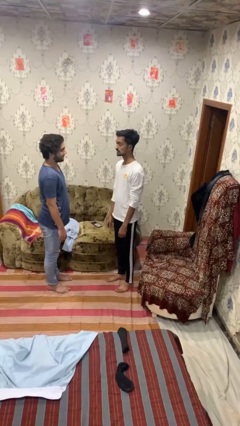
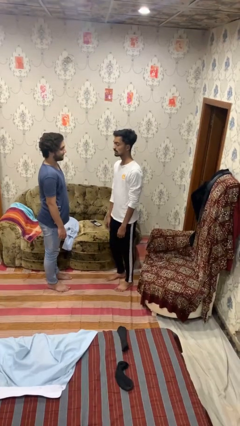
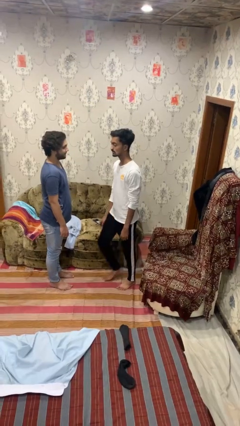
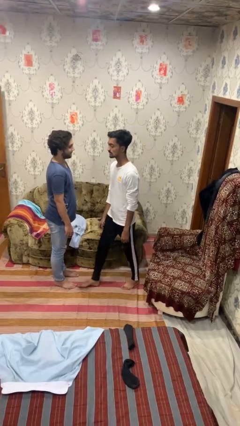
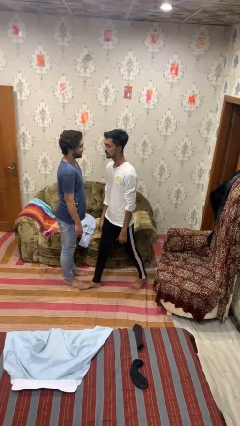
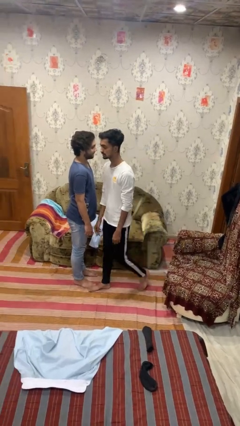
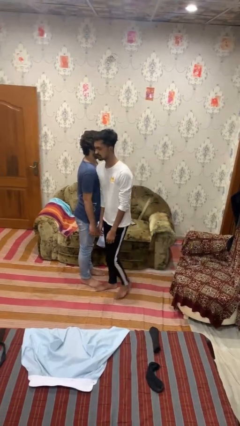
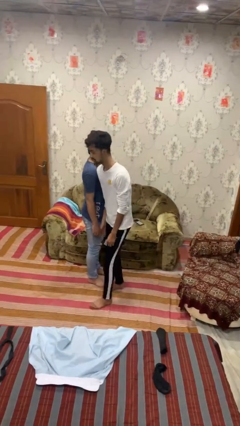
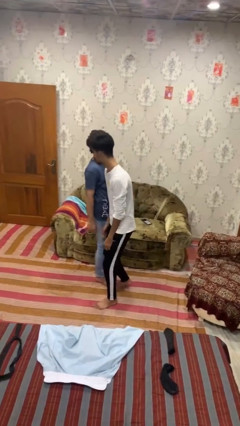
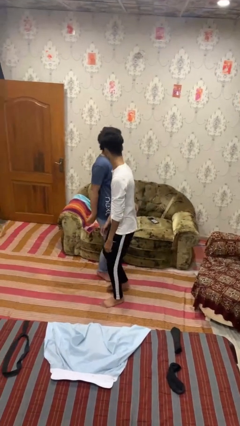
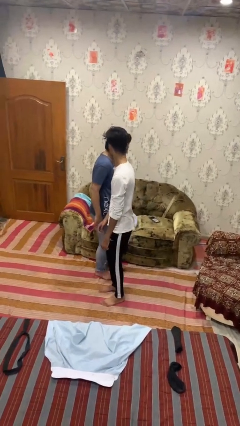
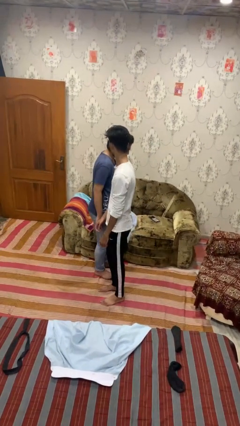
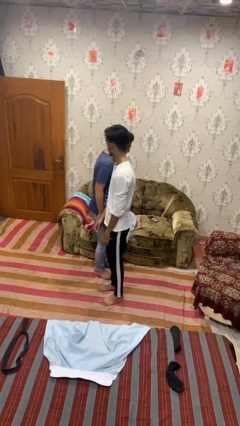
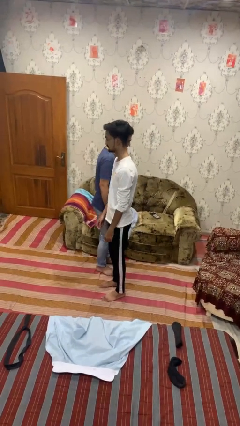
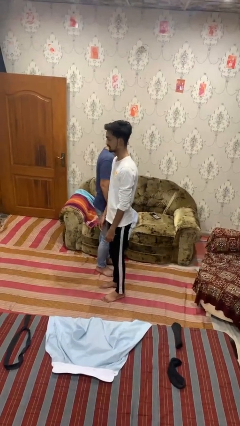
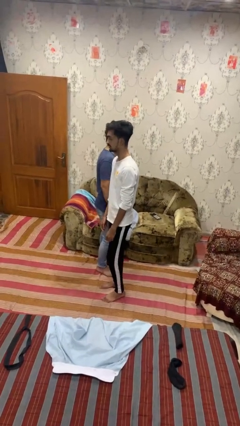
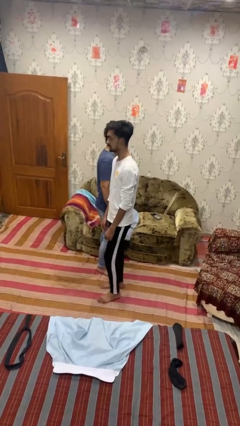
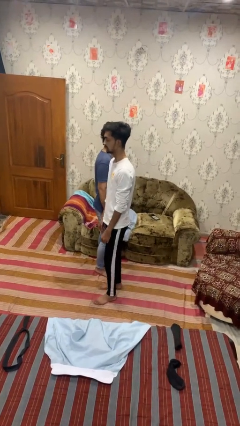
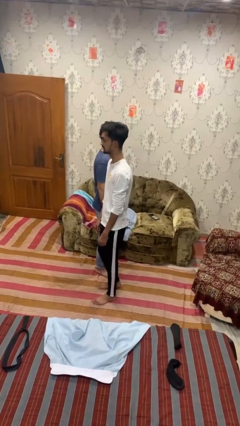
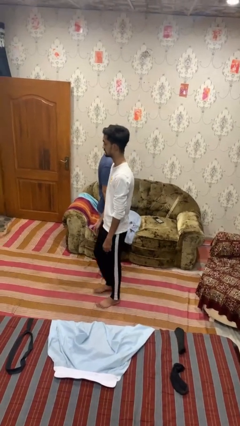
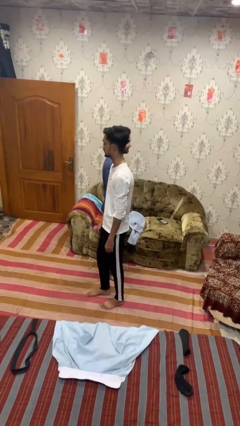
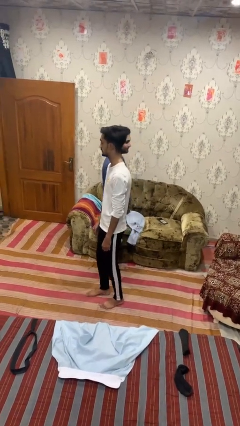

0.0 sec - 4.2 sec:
person bumps into person

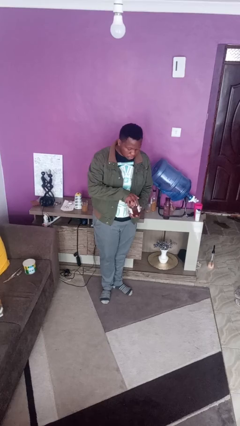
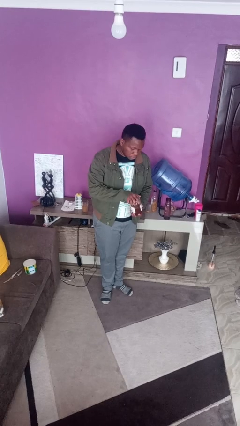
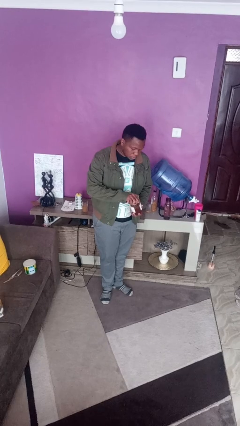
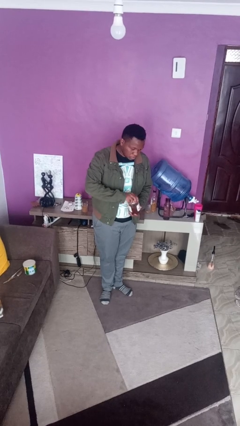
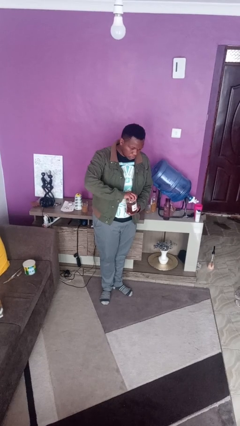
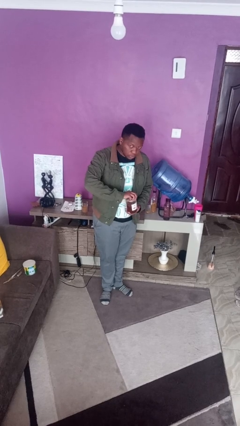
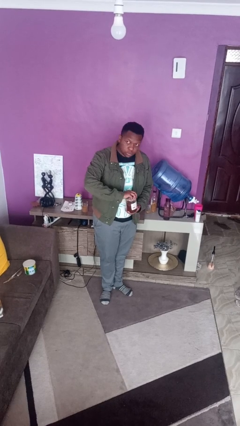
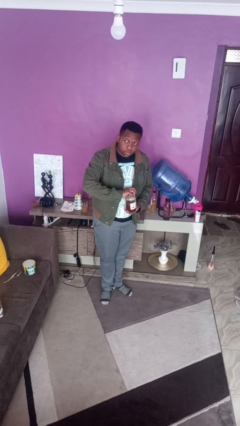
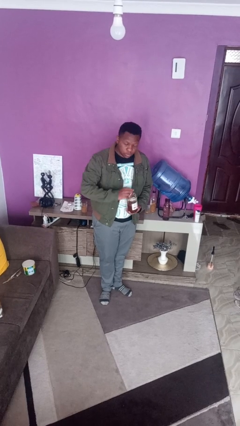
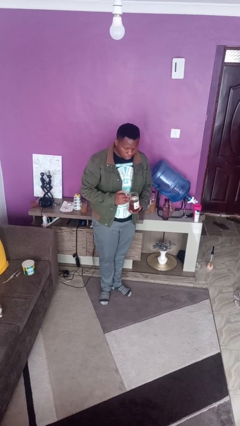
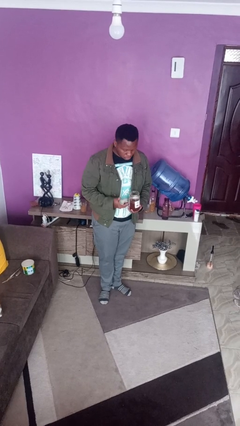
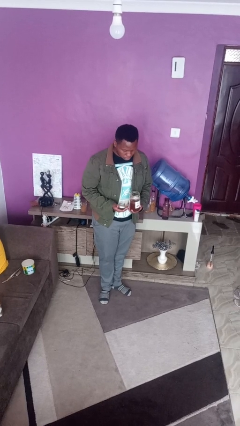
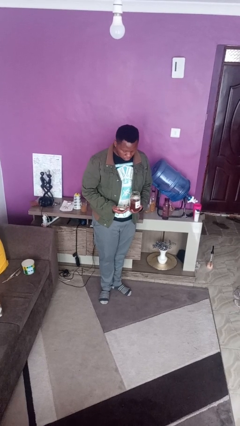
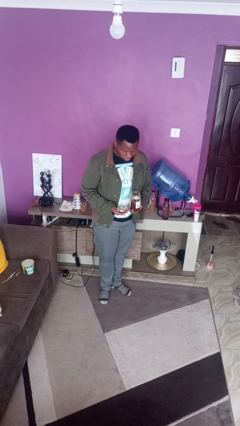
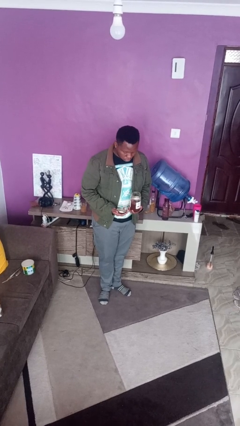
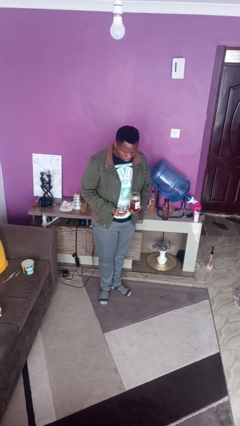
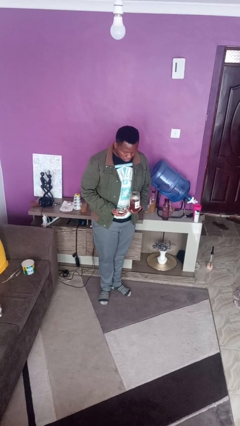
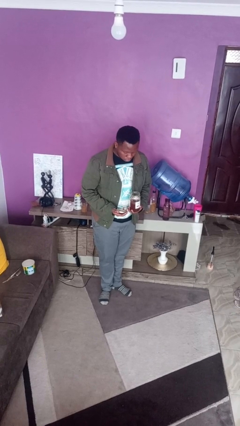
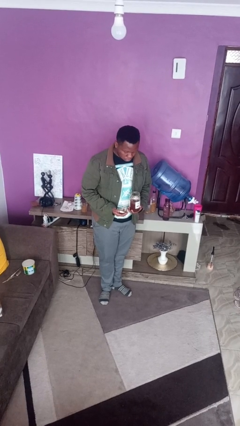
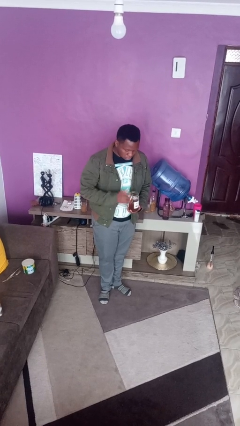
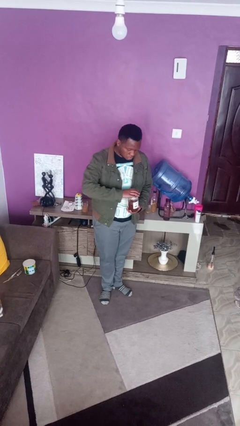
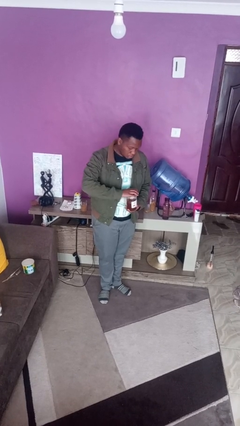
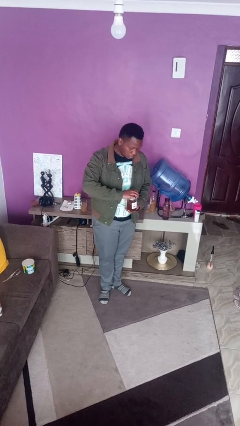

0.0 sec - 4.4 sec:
person opens jar

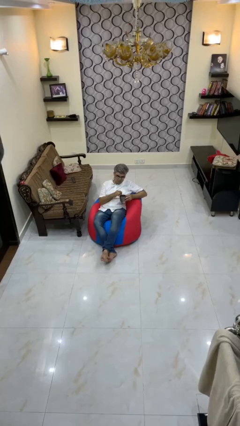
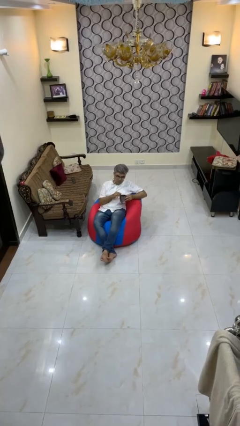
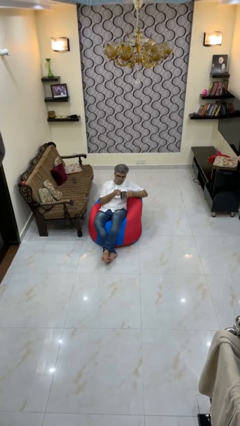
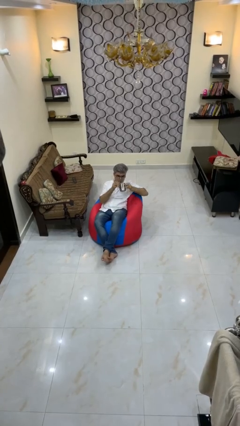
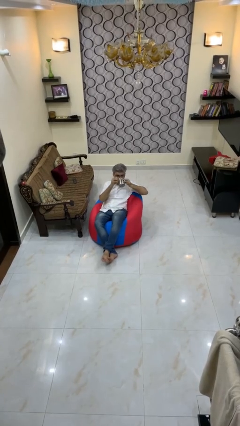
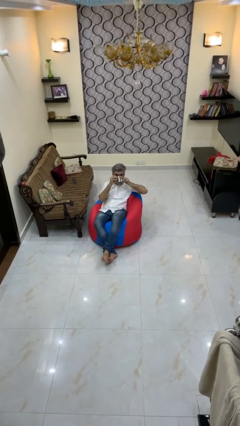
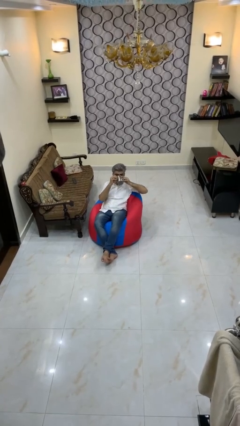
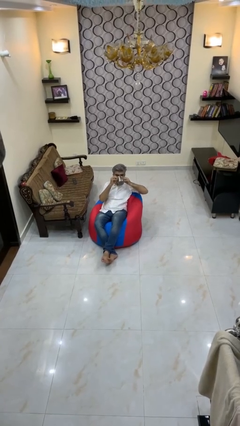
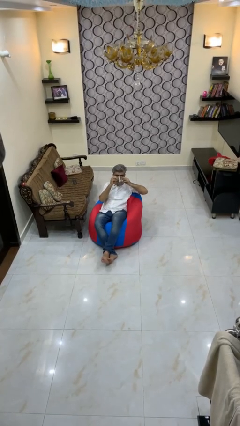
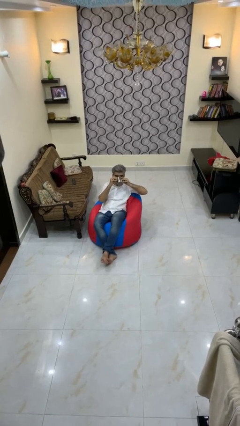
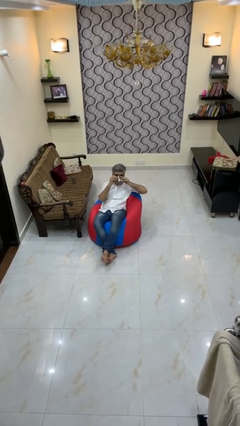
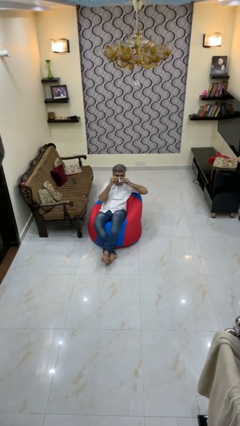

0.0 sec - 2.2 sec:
person drinks from mug

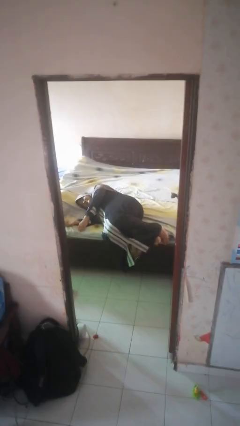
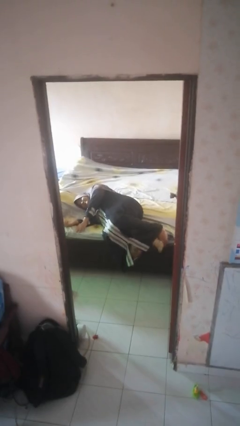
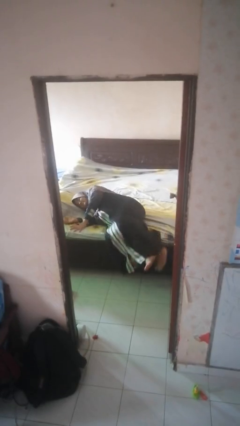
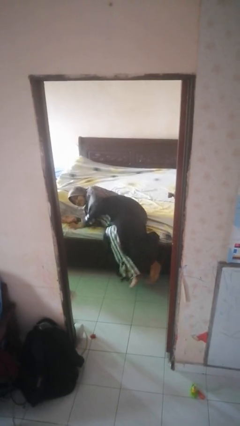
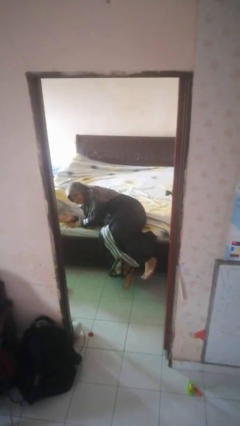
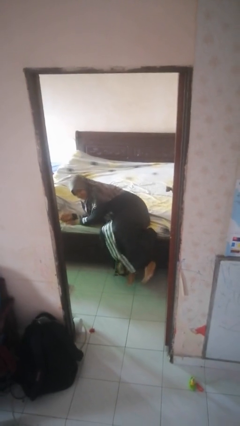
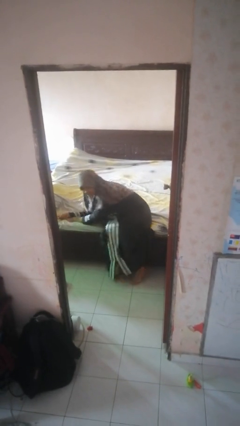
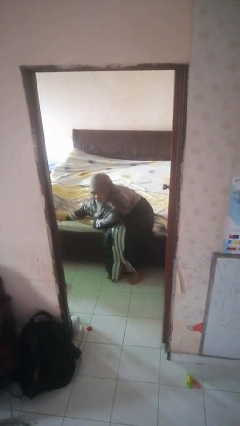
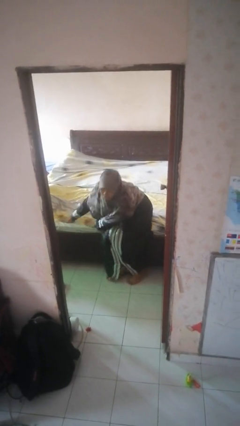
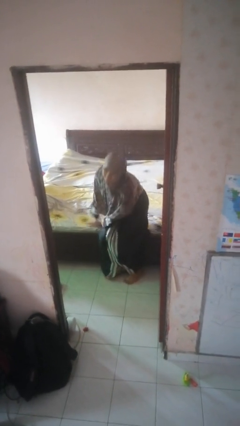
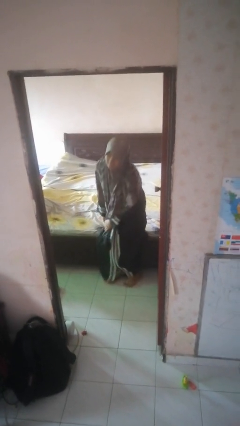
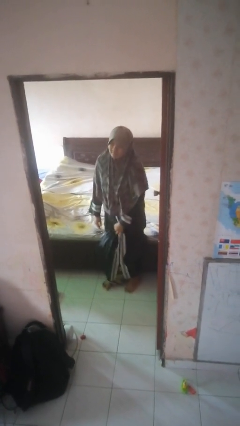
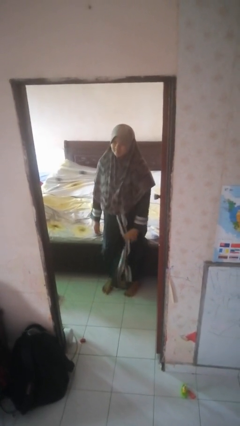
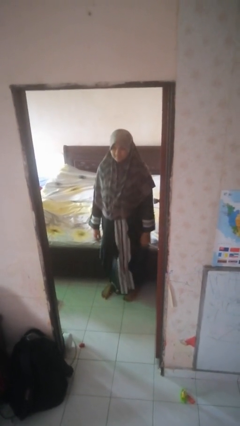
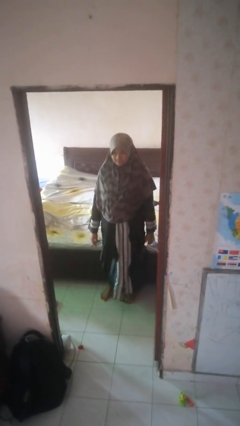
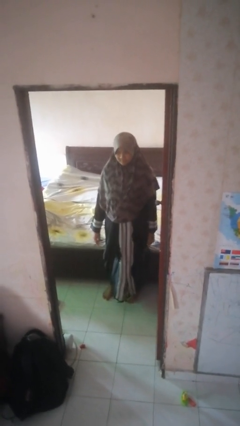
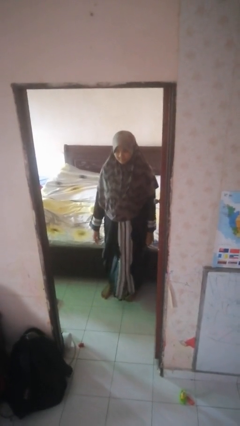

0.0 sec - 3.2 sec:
person stands up

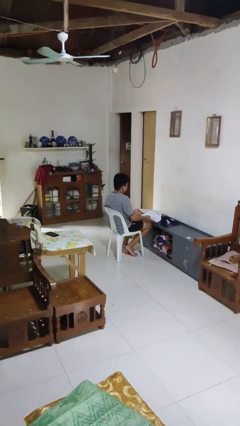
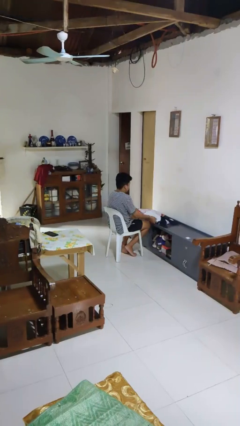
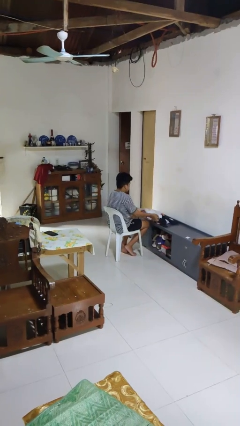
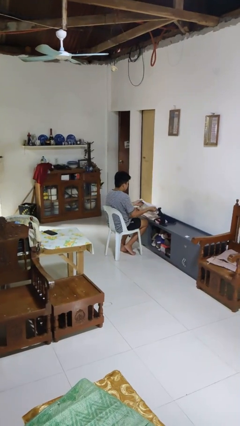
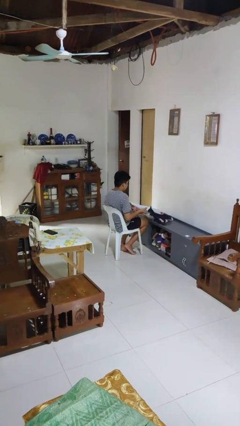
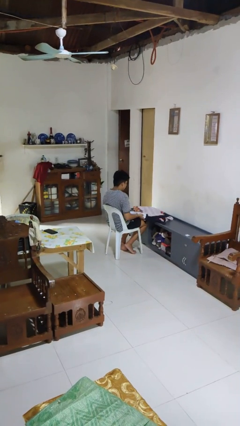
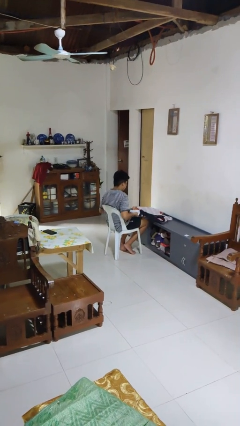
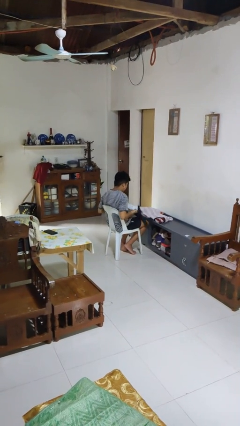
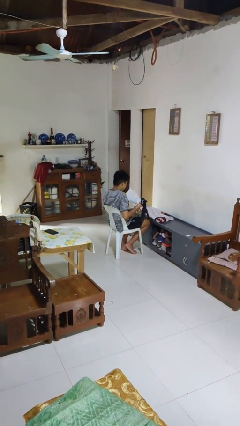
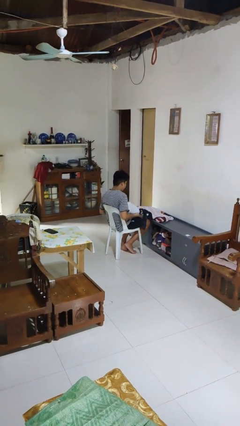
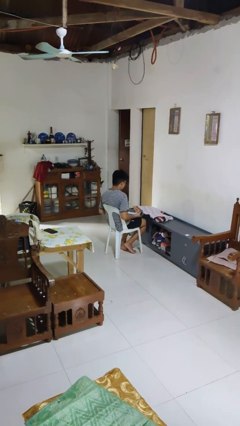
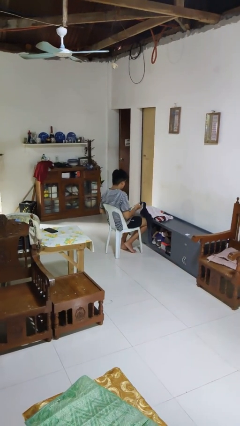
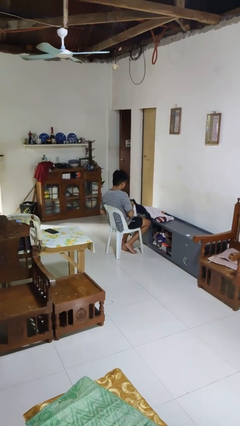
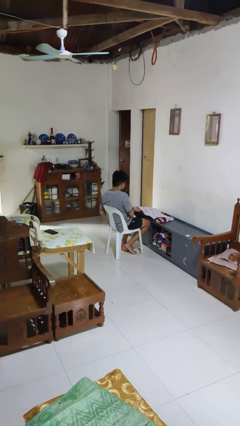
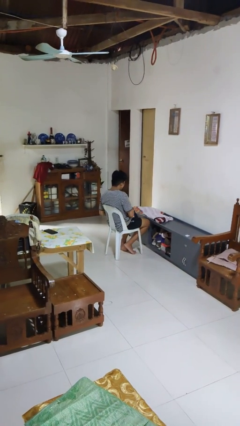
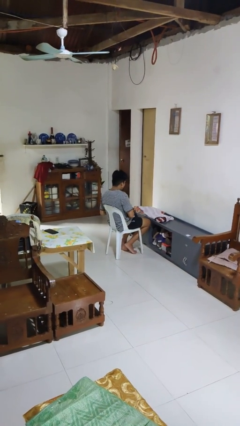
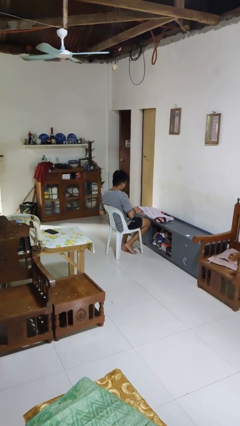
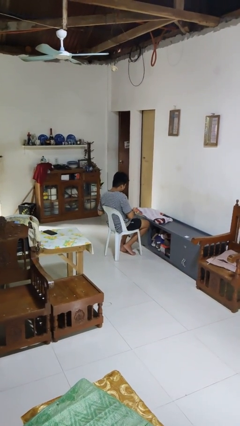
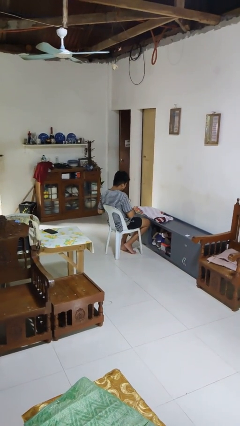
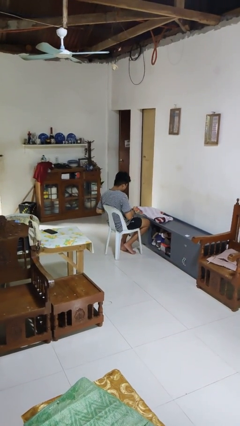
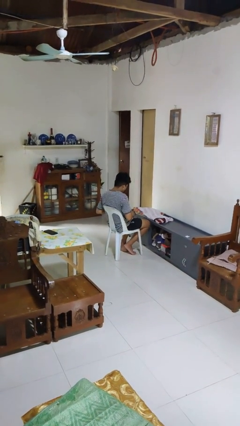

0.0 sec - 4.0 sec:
person folds shirt

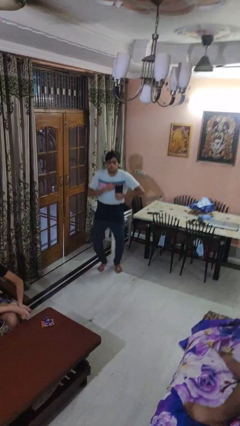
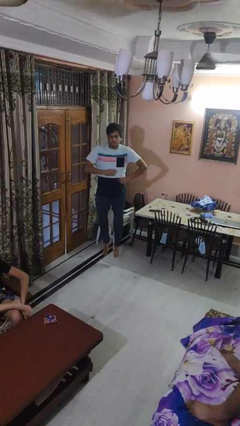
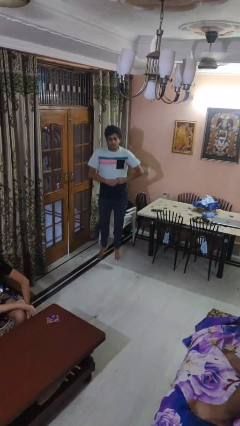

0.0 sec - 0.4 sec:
person jumps
